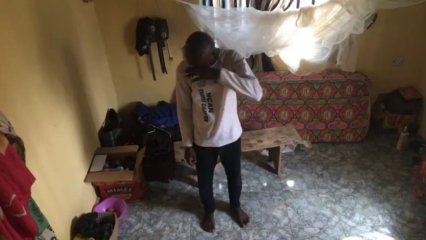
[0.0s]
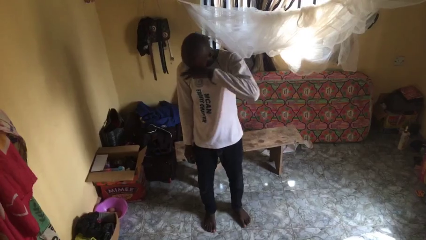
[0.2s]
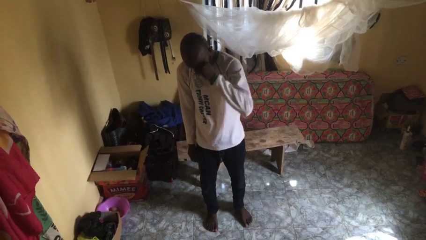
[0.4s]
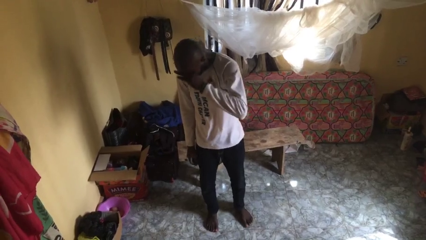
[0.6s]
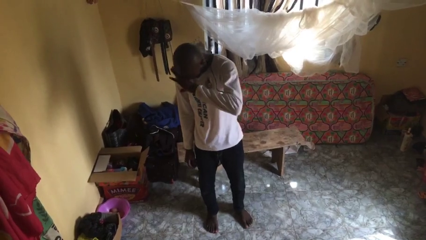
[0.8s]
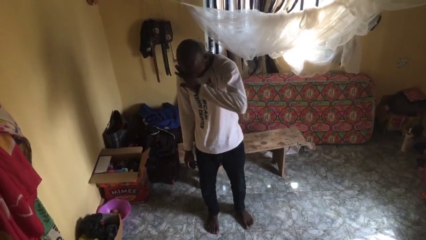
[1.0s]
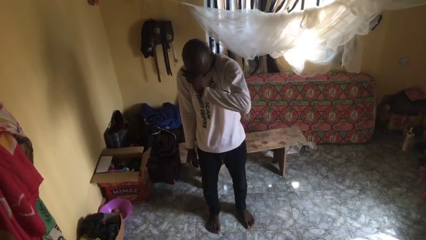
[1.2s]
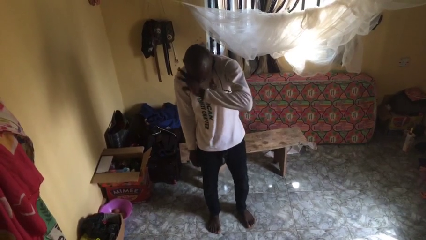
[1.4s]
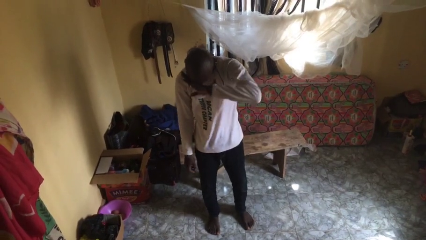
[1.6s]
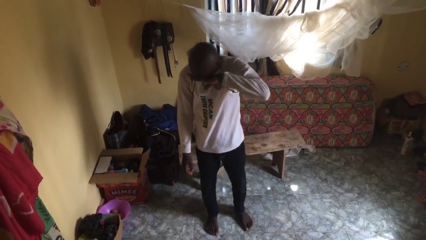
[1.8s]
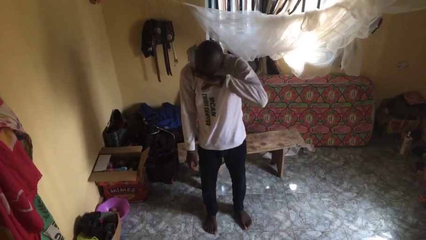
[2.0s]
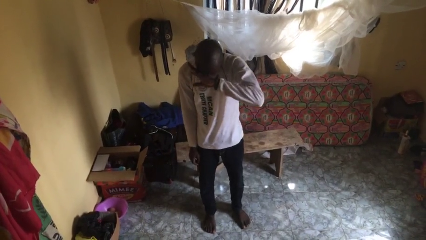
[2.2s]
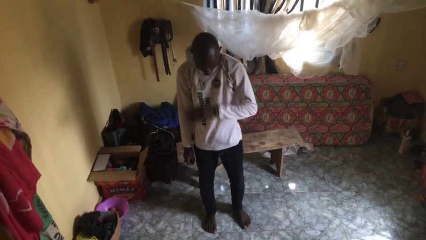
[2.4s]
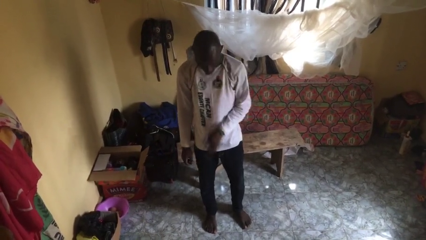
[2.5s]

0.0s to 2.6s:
person rubs eyes

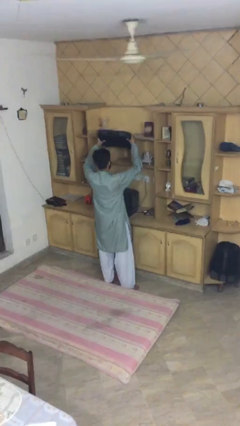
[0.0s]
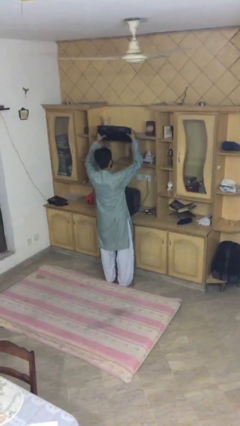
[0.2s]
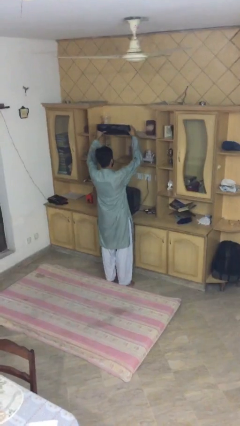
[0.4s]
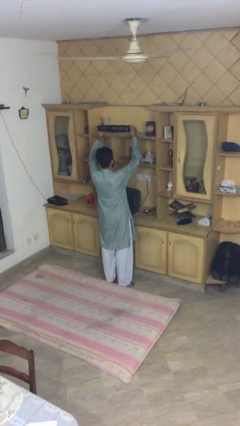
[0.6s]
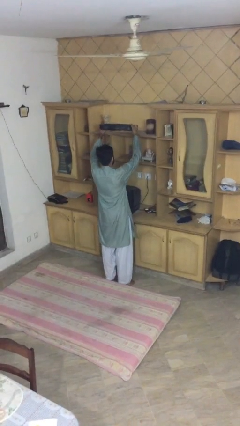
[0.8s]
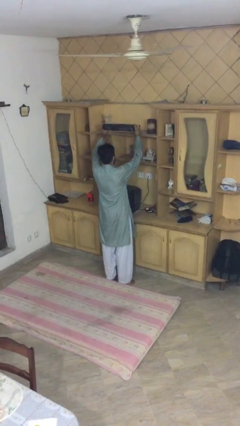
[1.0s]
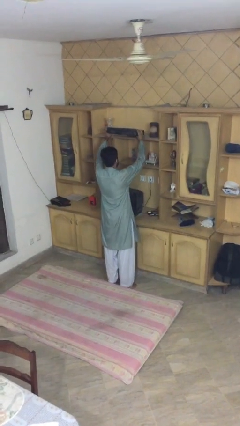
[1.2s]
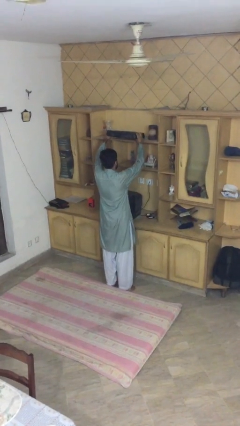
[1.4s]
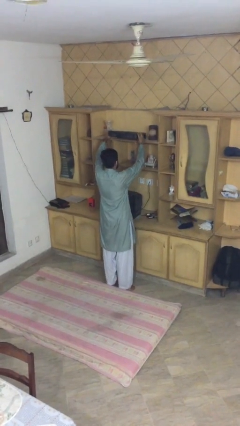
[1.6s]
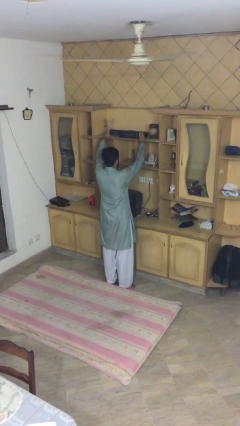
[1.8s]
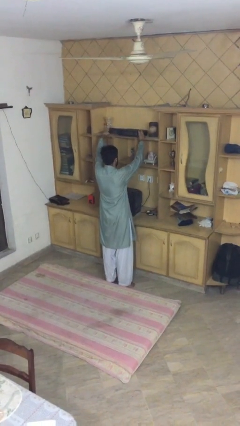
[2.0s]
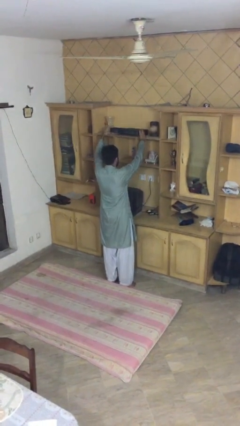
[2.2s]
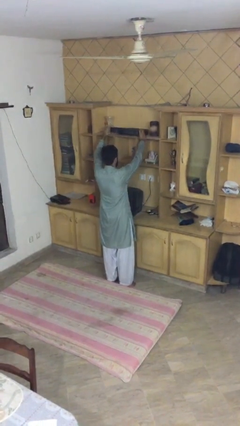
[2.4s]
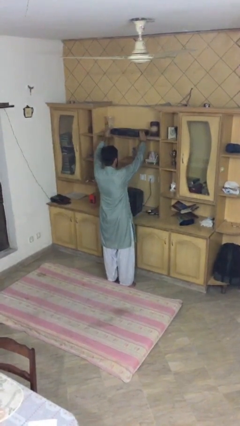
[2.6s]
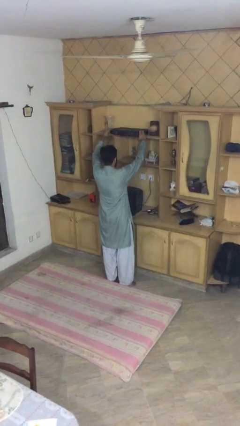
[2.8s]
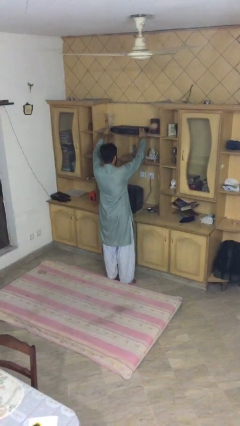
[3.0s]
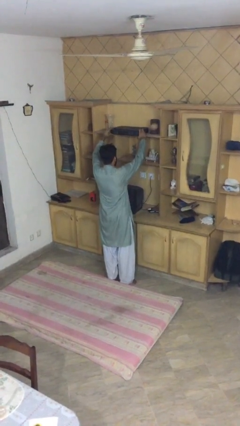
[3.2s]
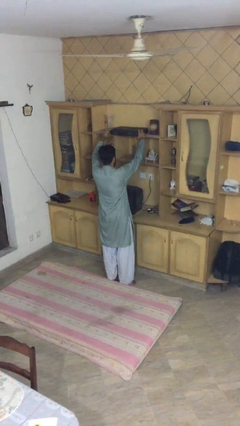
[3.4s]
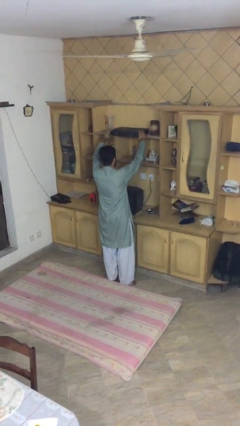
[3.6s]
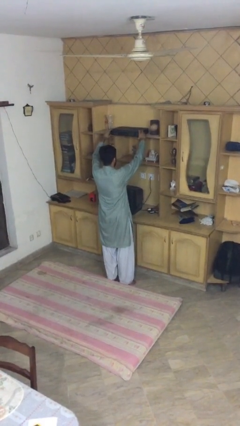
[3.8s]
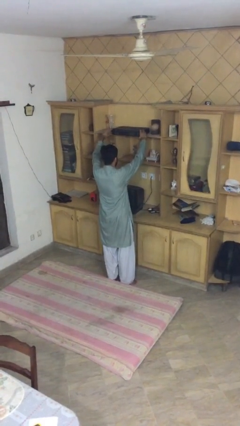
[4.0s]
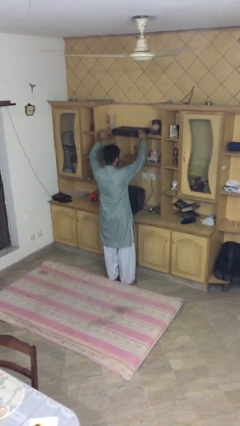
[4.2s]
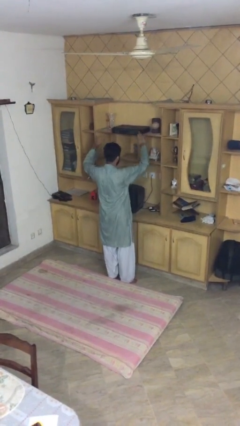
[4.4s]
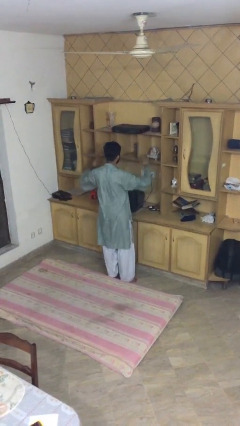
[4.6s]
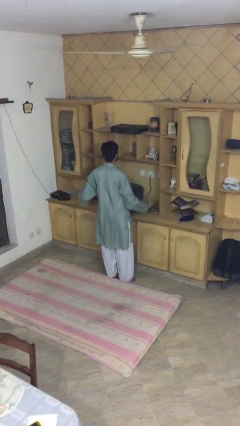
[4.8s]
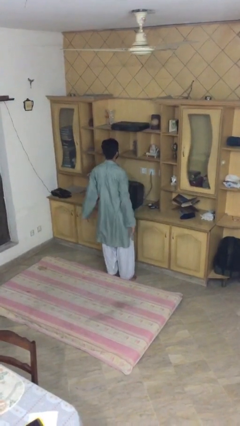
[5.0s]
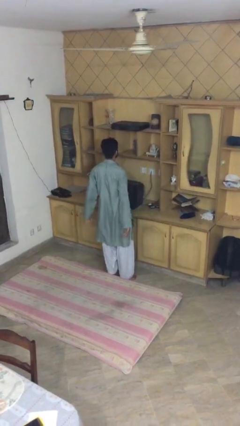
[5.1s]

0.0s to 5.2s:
person puts down object on shelf

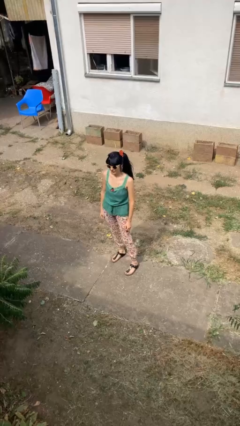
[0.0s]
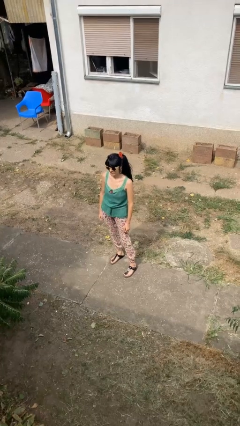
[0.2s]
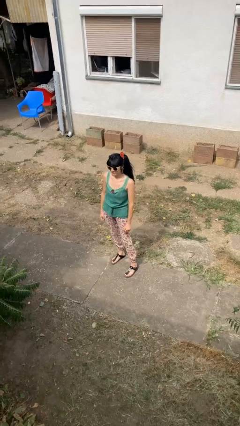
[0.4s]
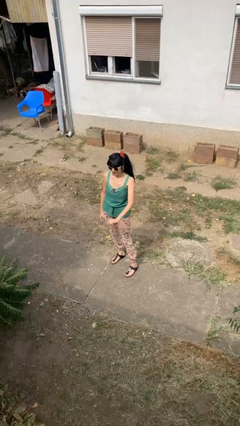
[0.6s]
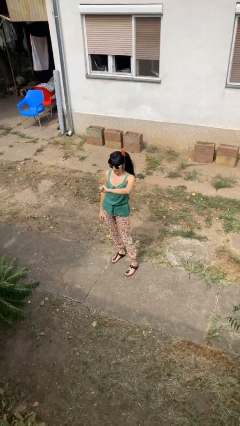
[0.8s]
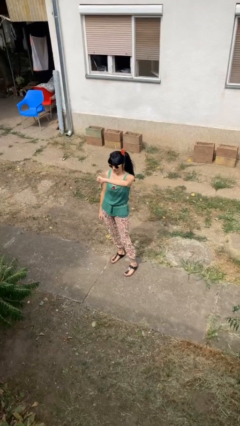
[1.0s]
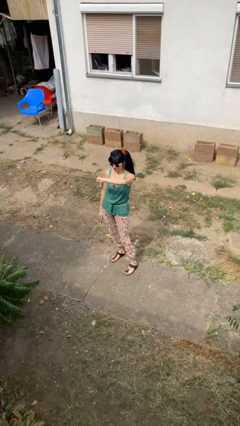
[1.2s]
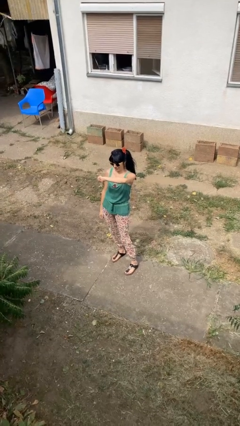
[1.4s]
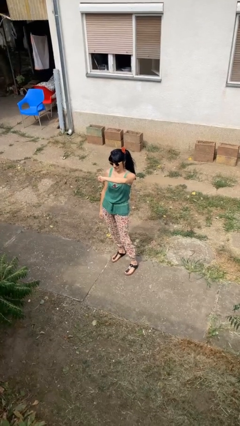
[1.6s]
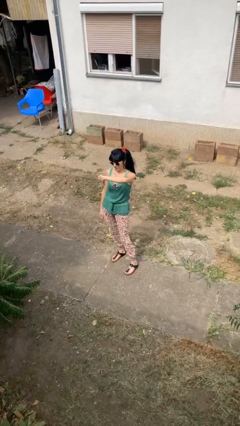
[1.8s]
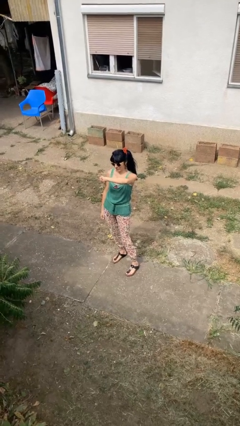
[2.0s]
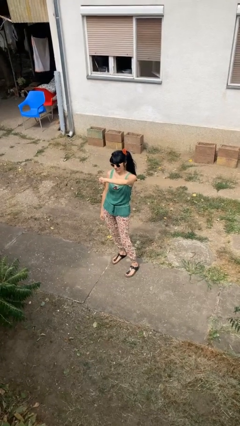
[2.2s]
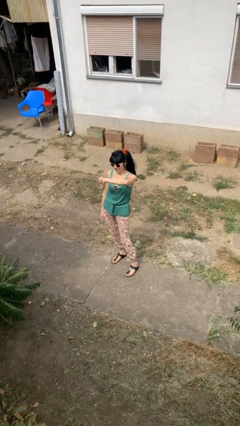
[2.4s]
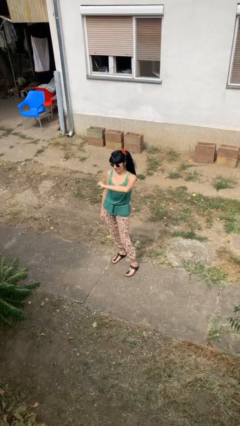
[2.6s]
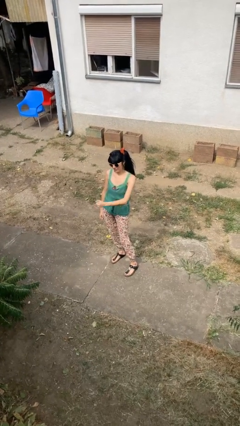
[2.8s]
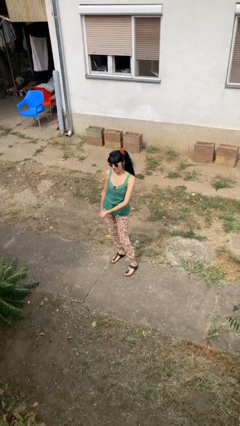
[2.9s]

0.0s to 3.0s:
person gestures thumbs down

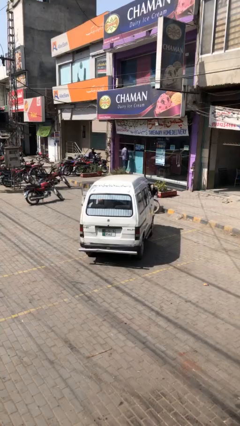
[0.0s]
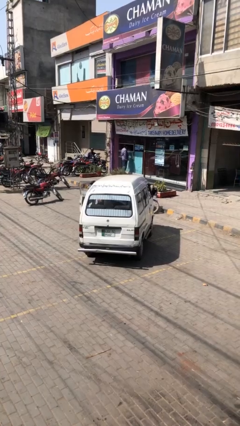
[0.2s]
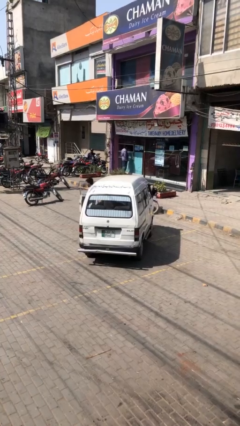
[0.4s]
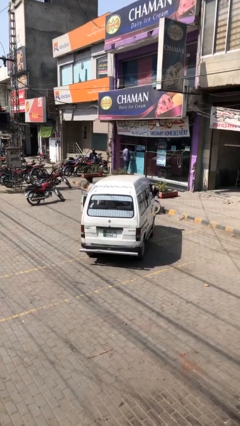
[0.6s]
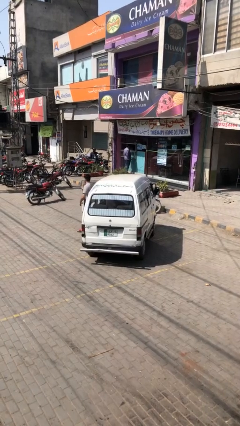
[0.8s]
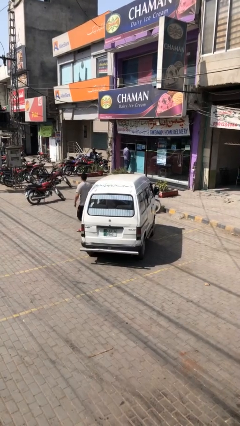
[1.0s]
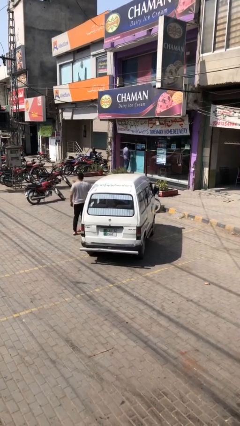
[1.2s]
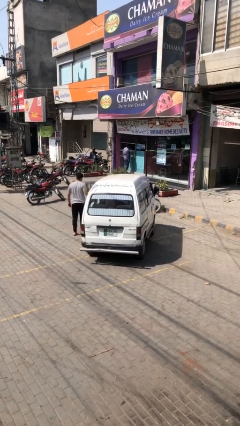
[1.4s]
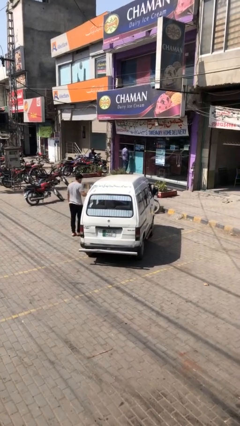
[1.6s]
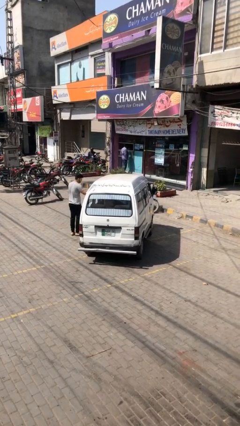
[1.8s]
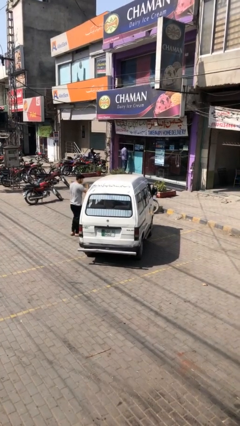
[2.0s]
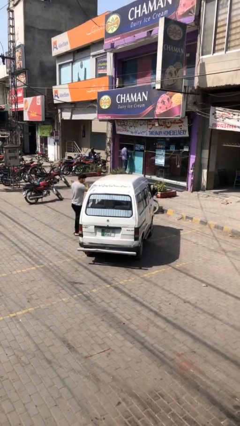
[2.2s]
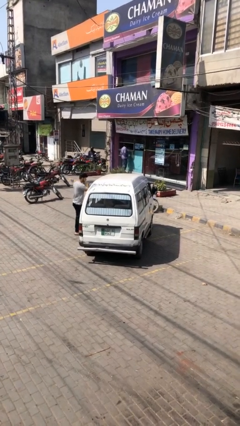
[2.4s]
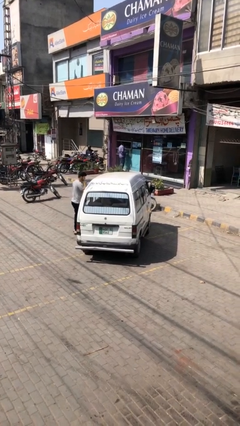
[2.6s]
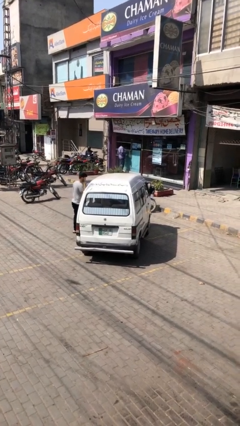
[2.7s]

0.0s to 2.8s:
car drops off person

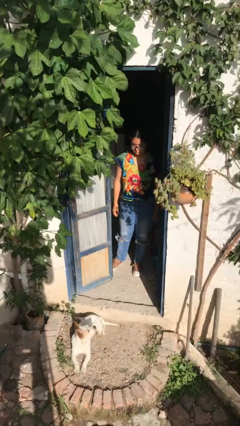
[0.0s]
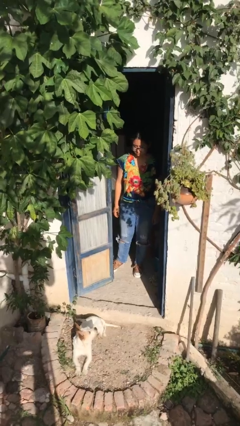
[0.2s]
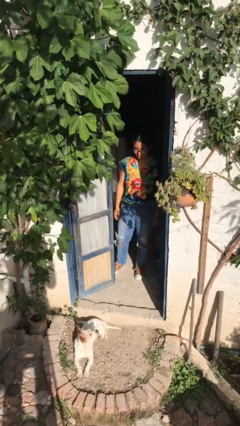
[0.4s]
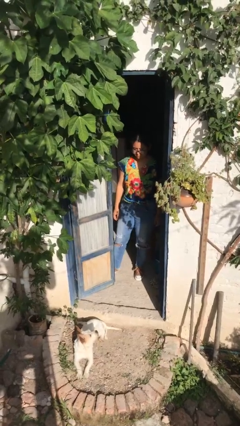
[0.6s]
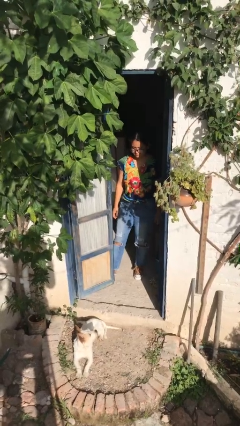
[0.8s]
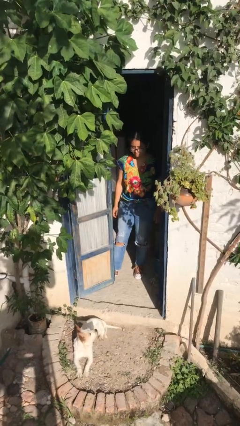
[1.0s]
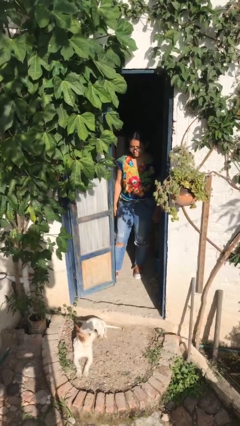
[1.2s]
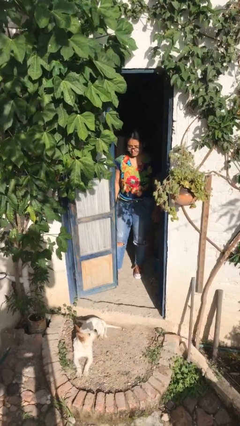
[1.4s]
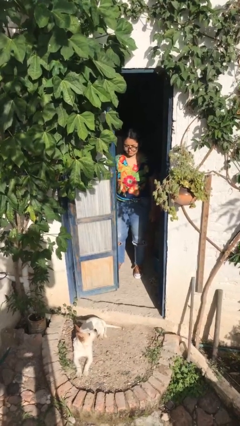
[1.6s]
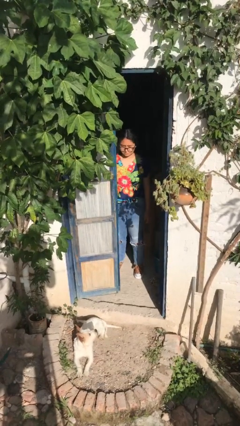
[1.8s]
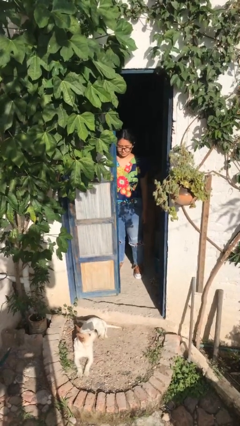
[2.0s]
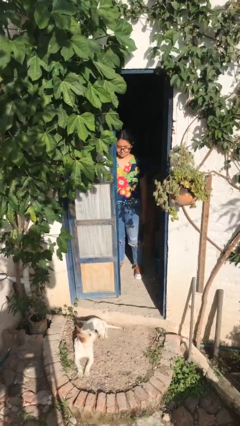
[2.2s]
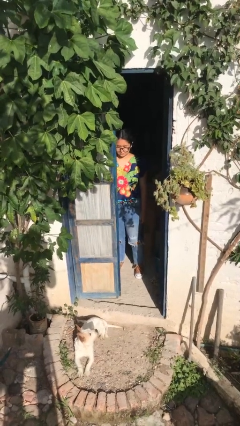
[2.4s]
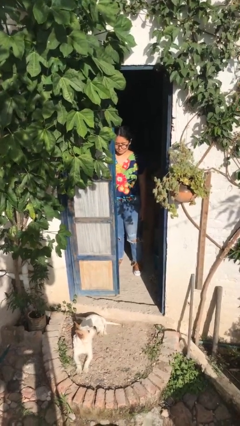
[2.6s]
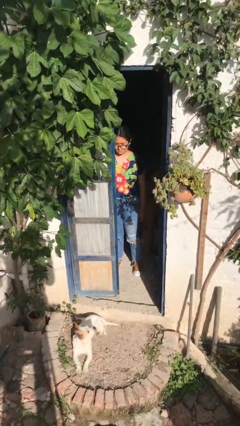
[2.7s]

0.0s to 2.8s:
person closes door with foot

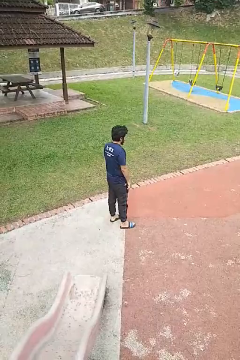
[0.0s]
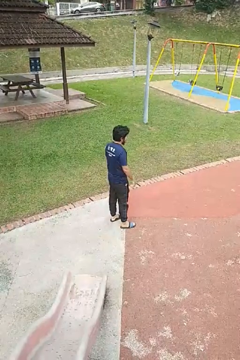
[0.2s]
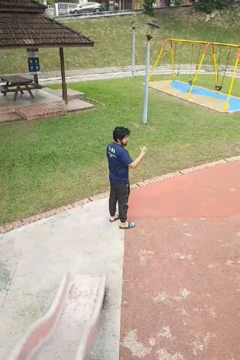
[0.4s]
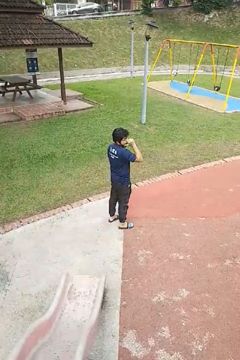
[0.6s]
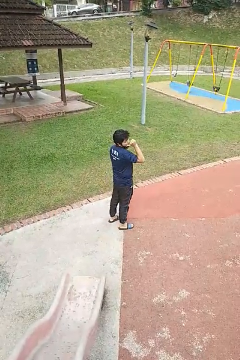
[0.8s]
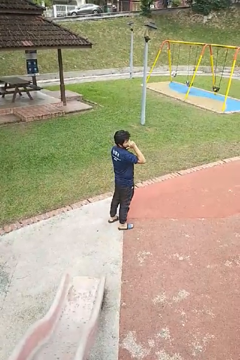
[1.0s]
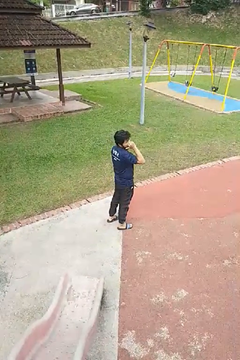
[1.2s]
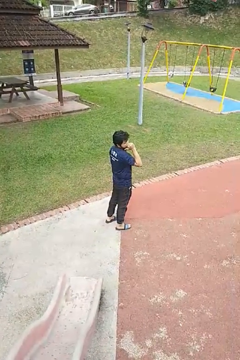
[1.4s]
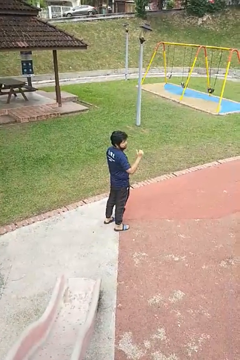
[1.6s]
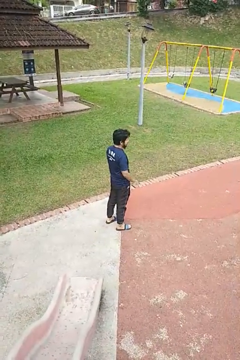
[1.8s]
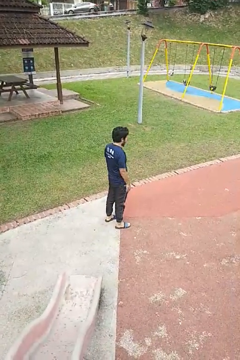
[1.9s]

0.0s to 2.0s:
person gestures behind me
